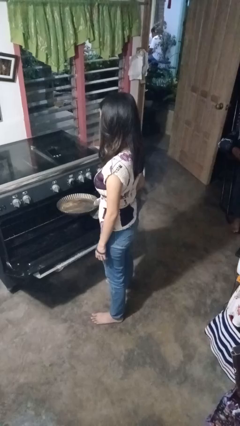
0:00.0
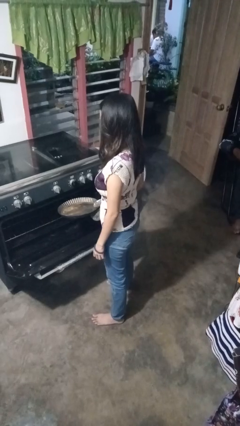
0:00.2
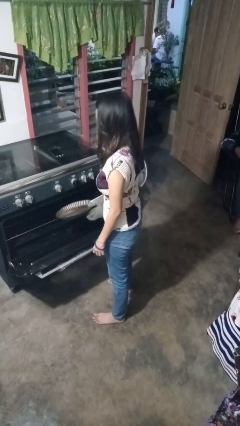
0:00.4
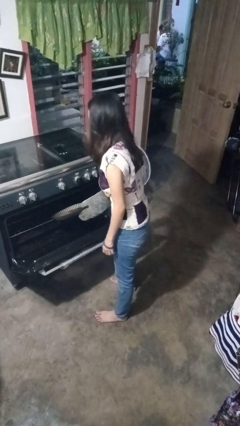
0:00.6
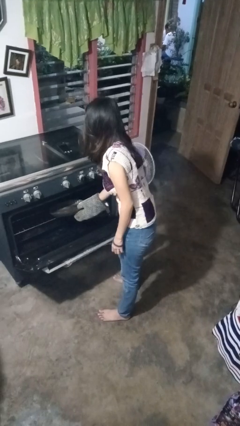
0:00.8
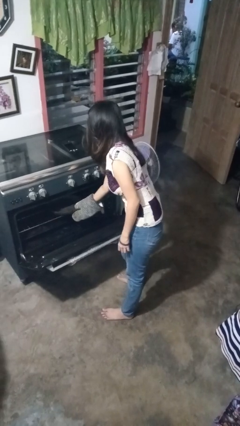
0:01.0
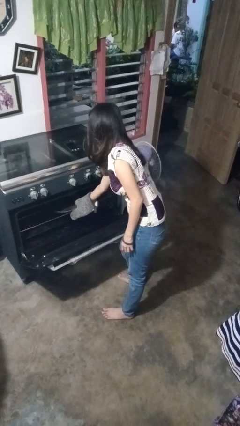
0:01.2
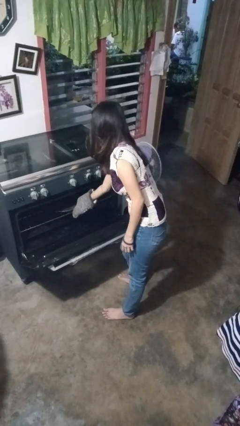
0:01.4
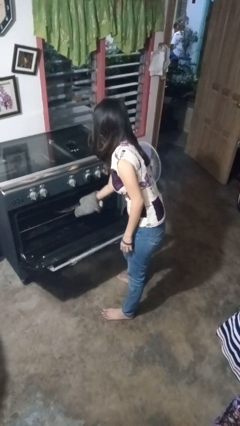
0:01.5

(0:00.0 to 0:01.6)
person puts object into oven

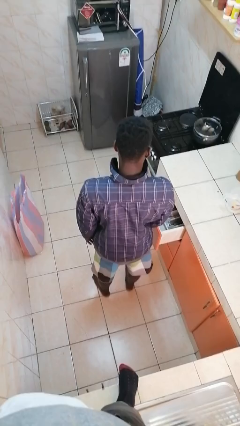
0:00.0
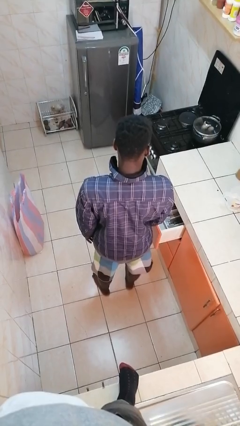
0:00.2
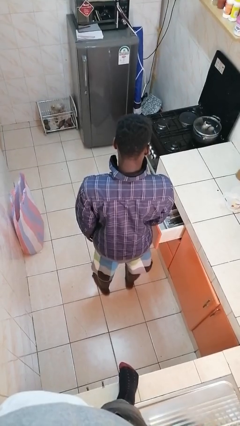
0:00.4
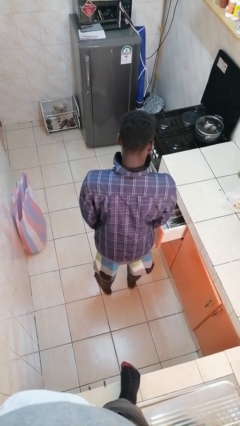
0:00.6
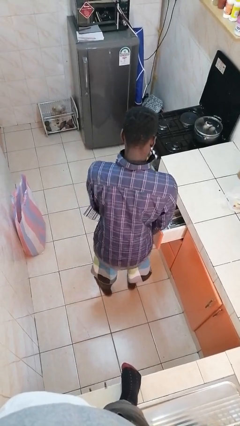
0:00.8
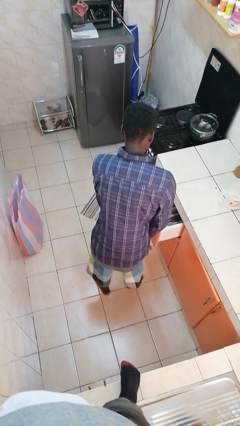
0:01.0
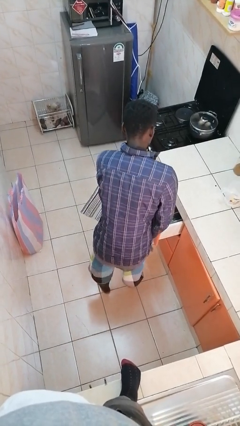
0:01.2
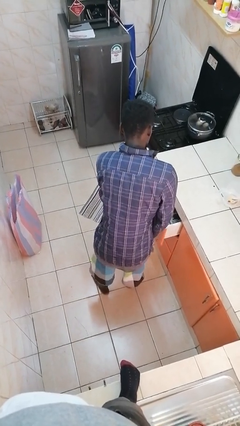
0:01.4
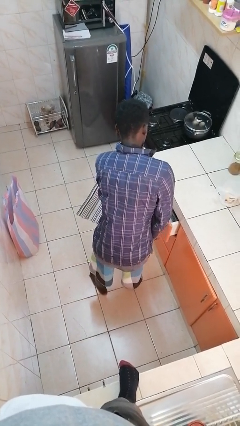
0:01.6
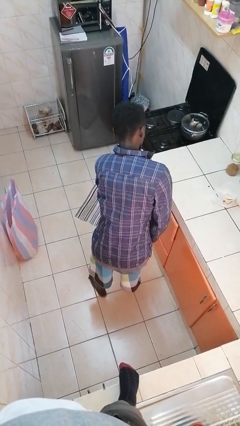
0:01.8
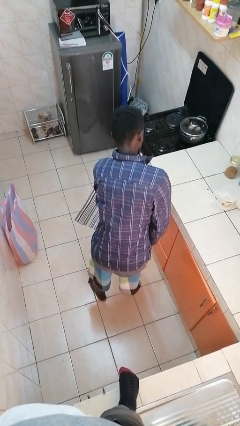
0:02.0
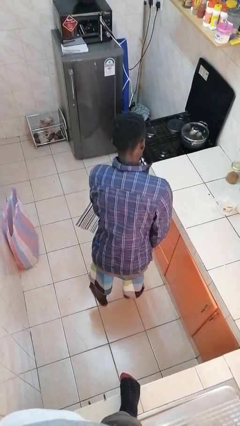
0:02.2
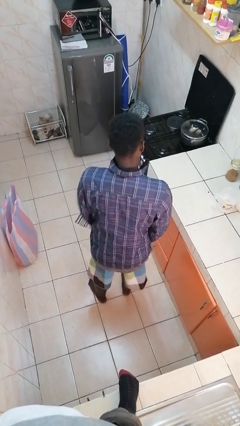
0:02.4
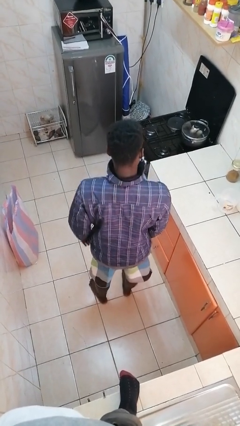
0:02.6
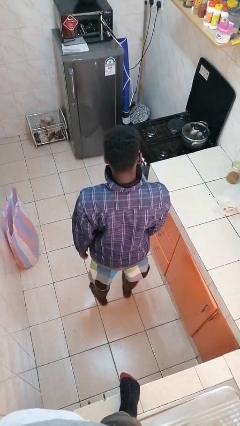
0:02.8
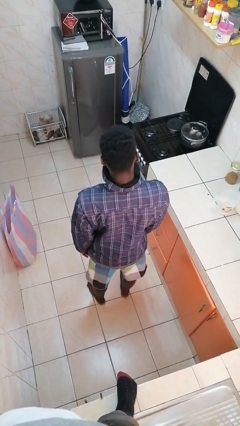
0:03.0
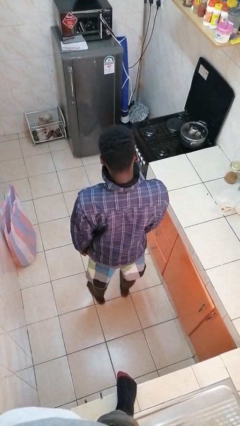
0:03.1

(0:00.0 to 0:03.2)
person closes kitchen drawer

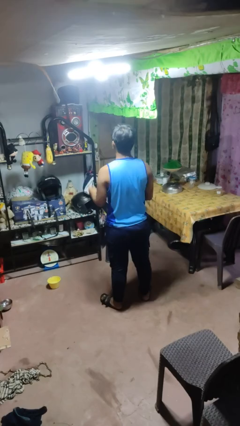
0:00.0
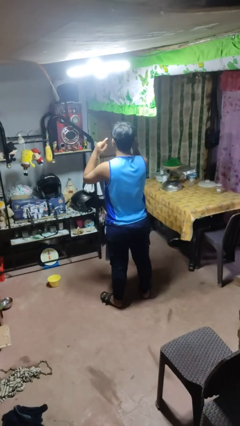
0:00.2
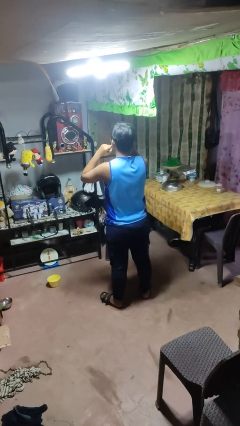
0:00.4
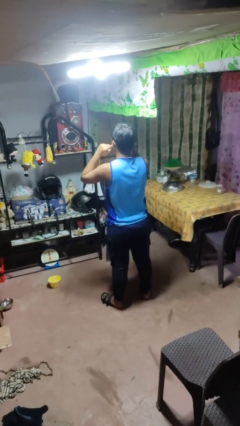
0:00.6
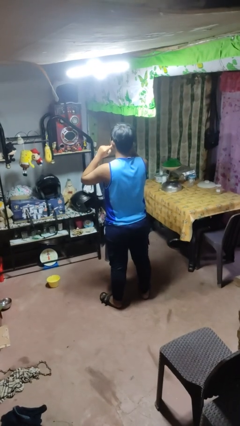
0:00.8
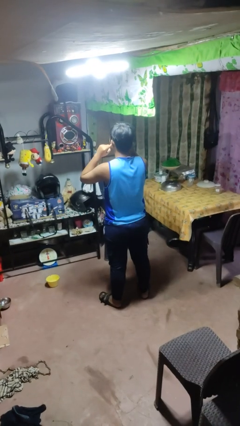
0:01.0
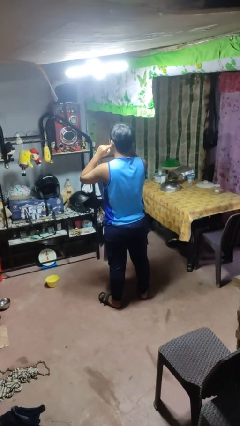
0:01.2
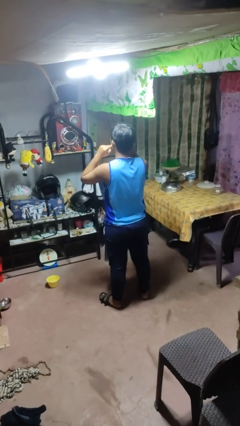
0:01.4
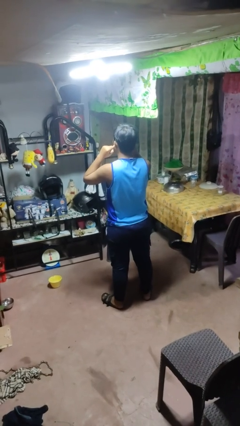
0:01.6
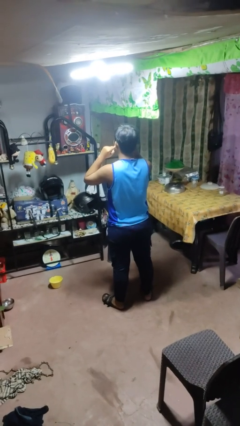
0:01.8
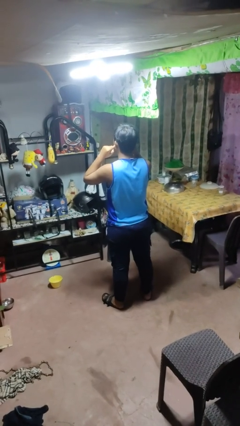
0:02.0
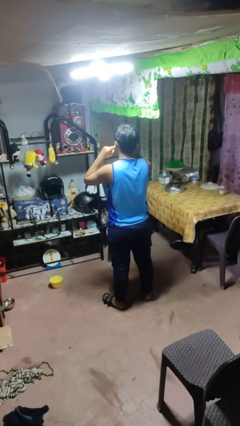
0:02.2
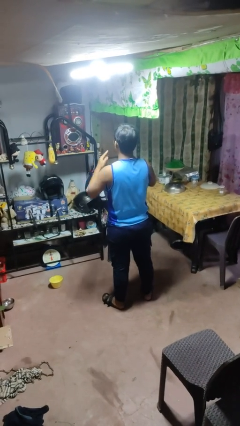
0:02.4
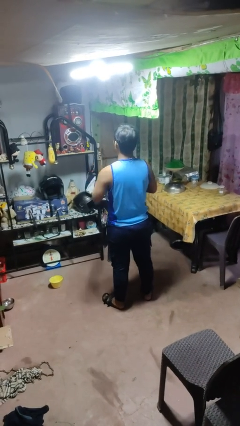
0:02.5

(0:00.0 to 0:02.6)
person puts fingers in ear

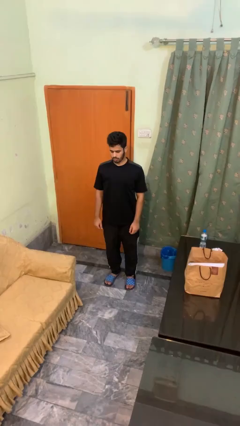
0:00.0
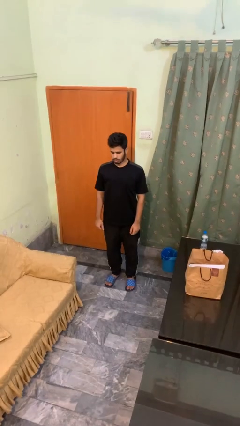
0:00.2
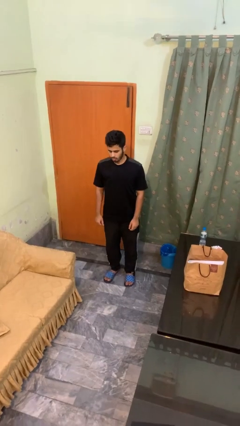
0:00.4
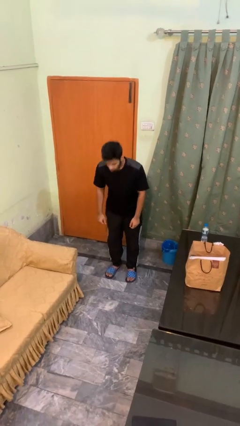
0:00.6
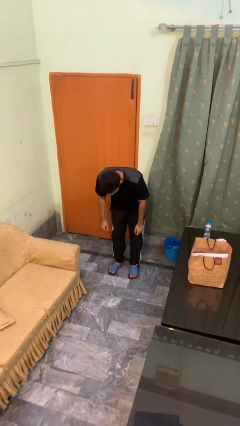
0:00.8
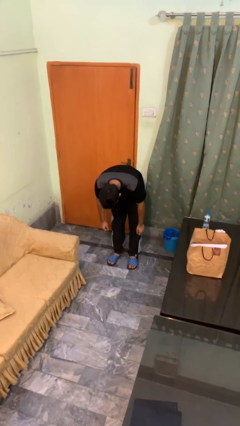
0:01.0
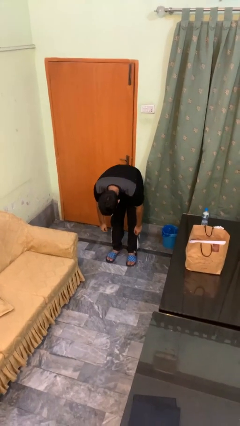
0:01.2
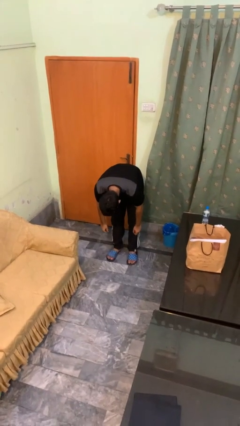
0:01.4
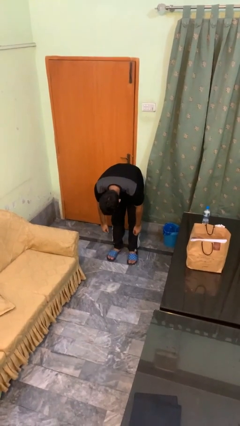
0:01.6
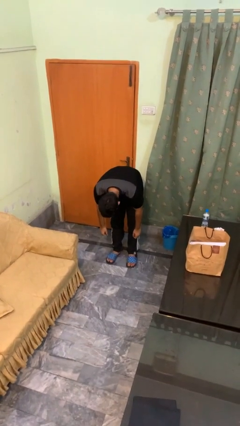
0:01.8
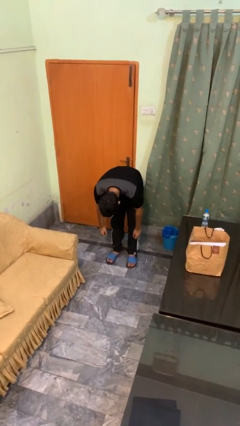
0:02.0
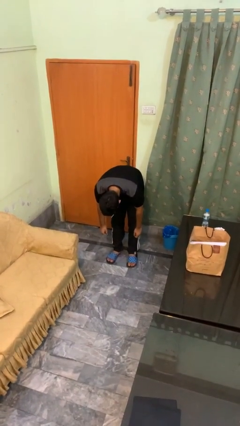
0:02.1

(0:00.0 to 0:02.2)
person bows

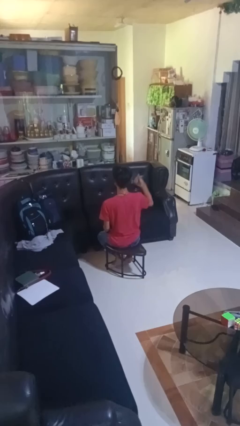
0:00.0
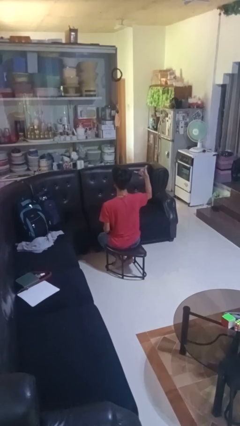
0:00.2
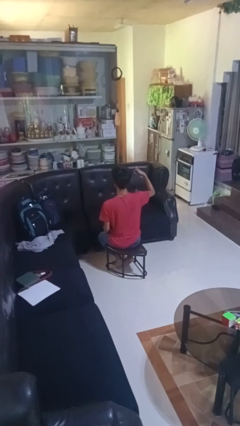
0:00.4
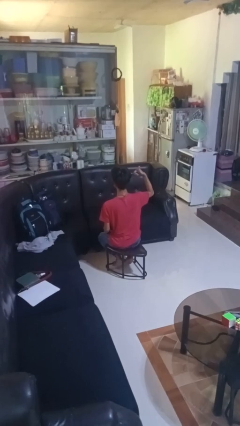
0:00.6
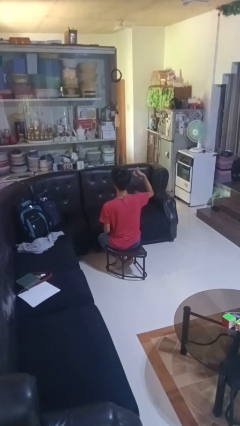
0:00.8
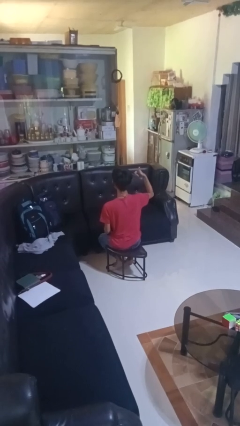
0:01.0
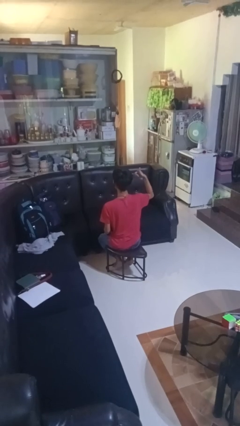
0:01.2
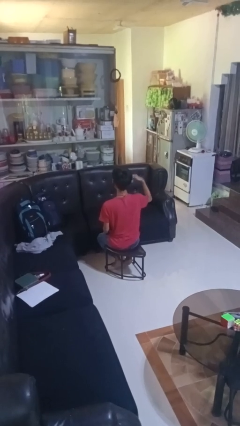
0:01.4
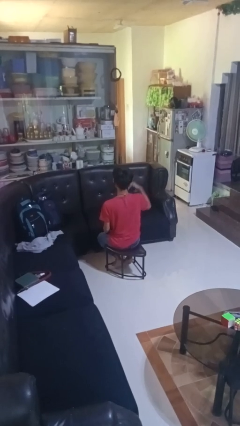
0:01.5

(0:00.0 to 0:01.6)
person gestures hang loose

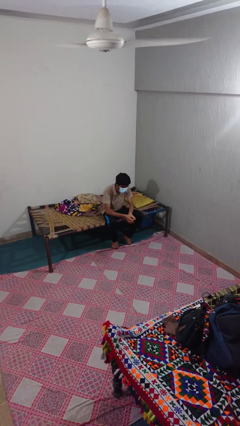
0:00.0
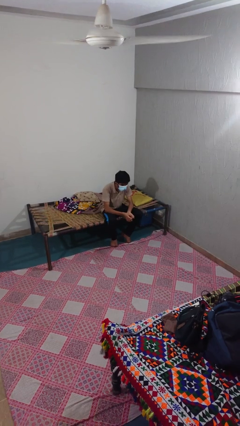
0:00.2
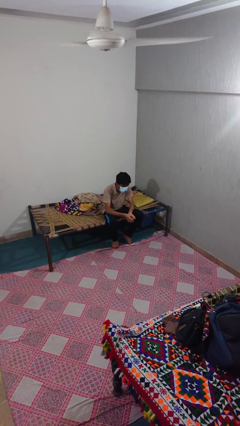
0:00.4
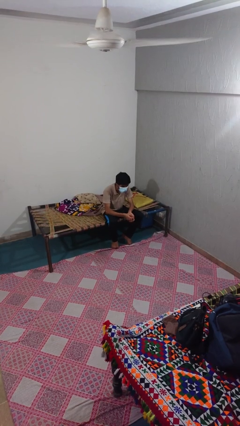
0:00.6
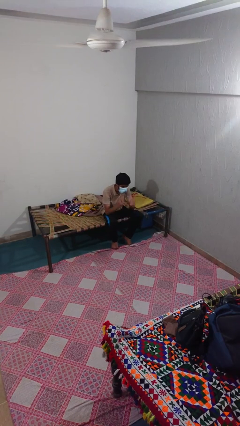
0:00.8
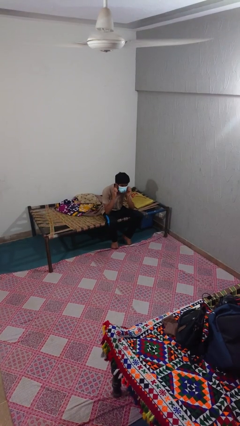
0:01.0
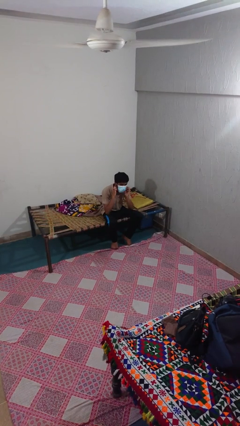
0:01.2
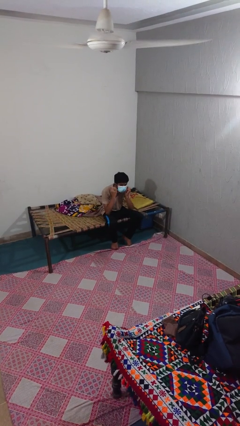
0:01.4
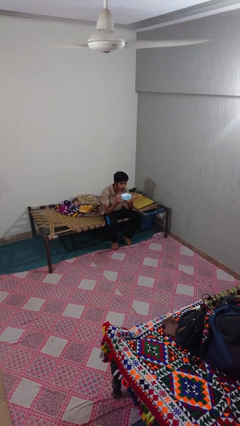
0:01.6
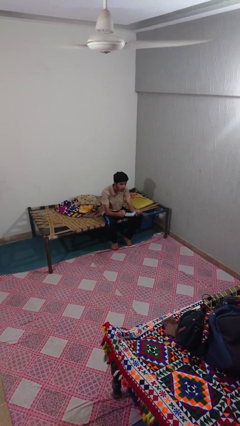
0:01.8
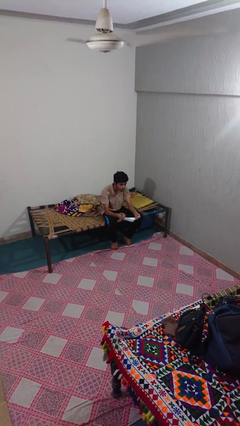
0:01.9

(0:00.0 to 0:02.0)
person takes off facemask

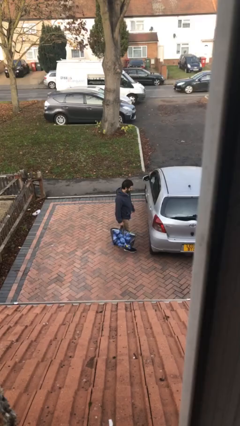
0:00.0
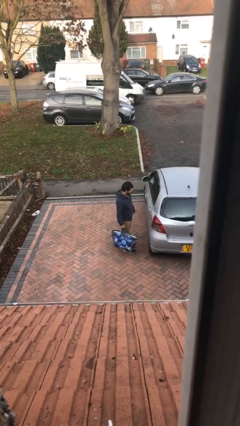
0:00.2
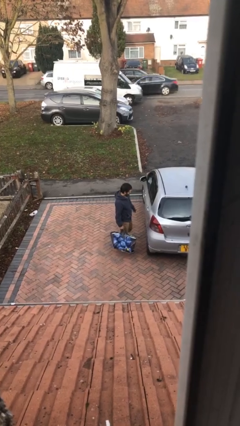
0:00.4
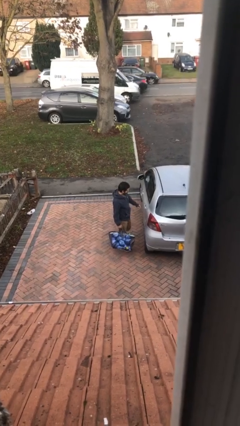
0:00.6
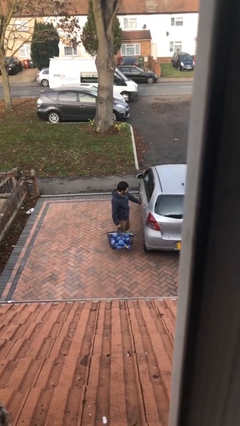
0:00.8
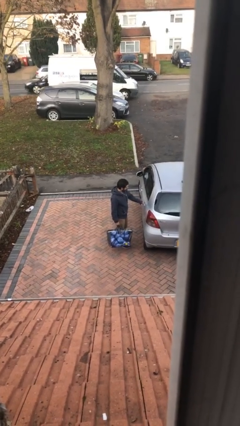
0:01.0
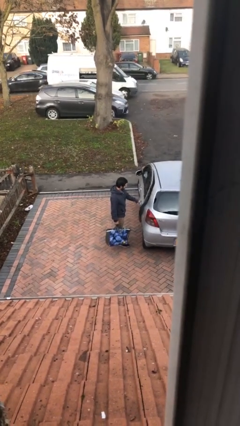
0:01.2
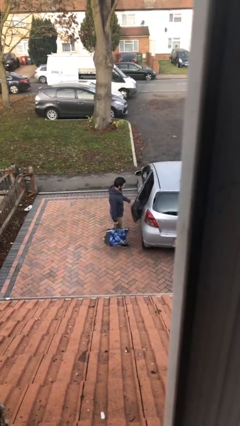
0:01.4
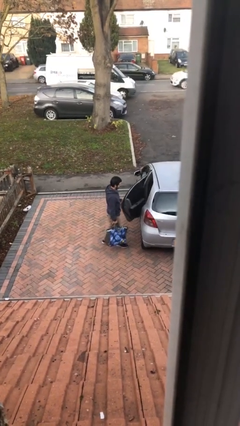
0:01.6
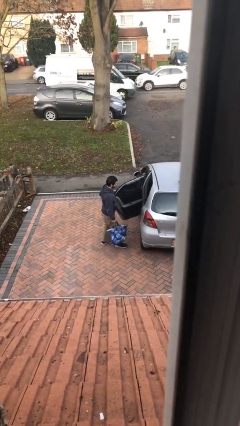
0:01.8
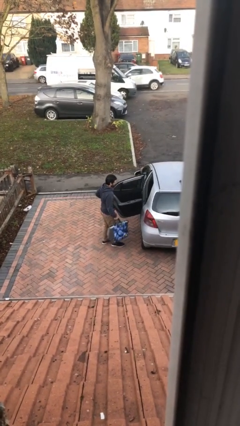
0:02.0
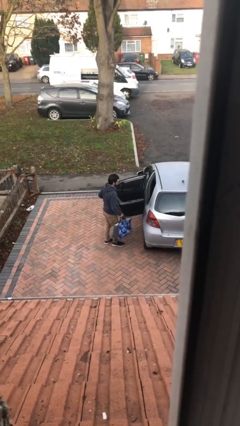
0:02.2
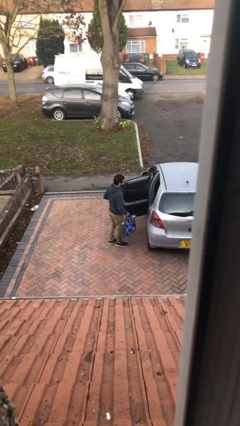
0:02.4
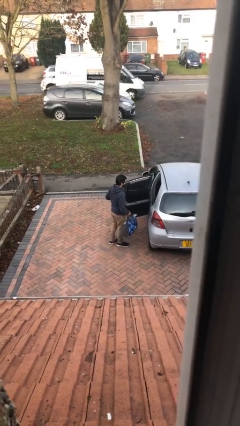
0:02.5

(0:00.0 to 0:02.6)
person opens car door

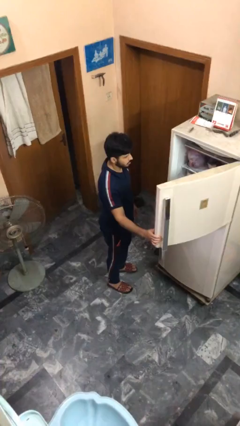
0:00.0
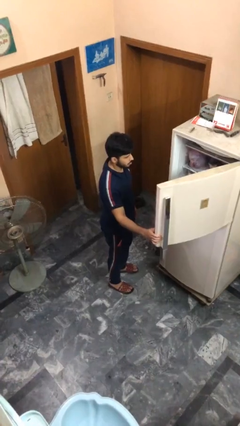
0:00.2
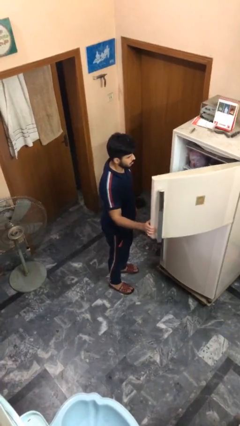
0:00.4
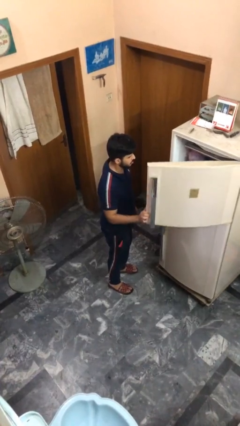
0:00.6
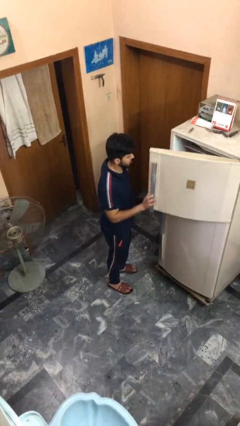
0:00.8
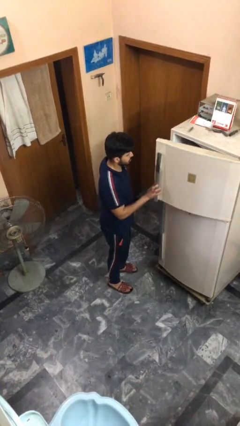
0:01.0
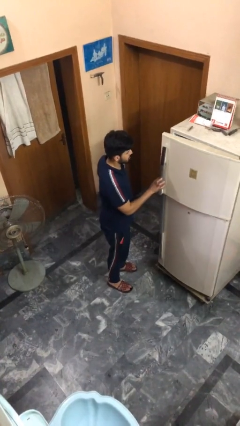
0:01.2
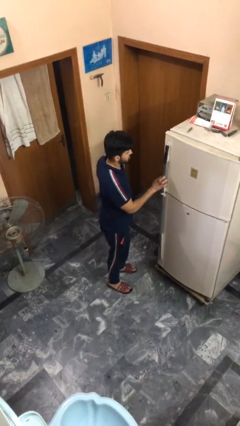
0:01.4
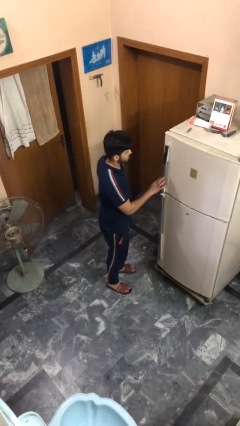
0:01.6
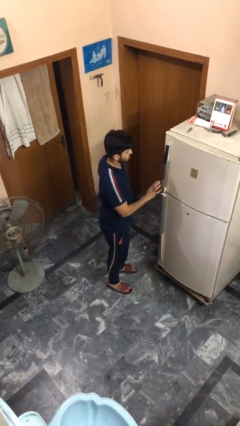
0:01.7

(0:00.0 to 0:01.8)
person closes refrigerator
